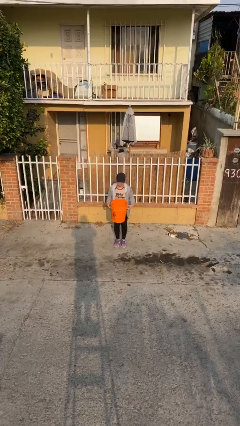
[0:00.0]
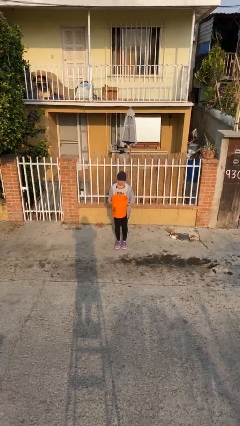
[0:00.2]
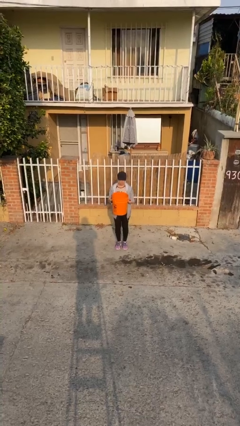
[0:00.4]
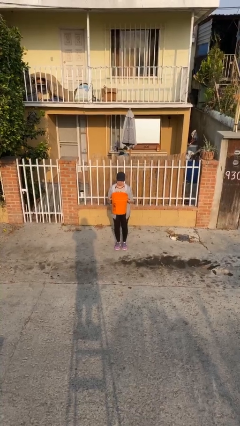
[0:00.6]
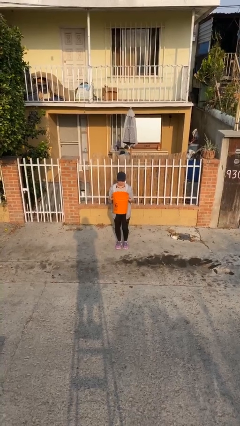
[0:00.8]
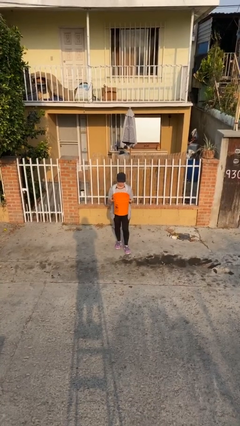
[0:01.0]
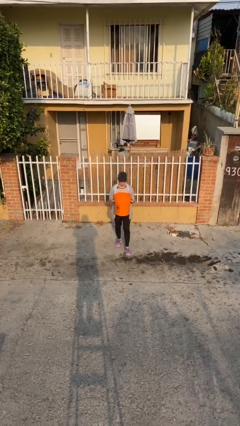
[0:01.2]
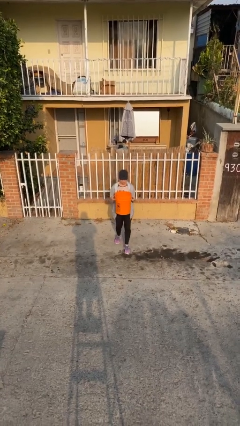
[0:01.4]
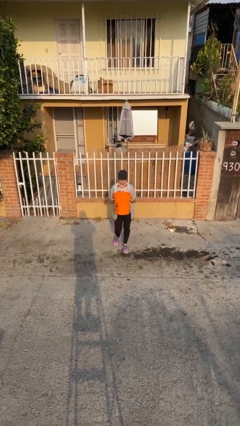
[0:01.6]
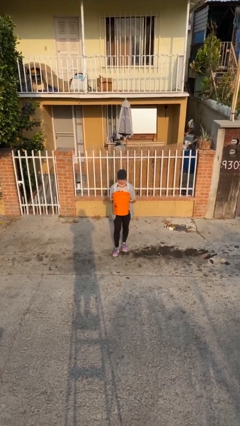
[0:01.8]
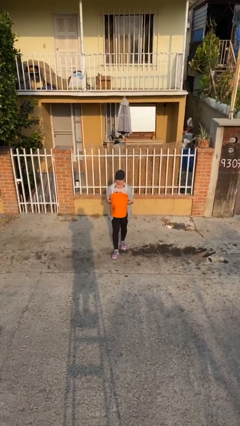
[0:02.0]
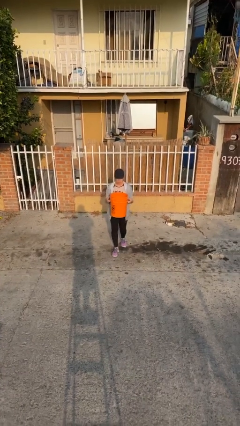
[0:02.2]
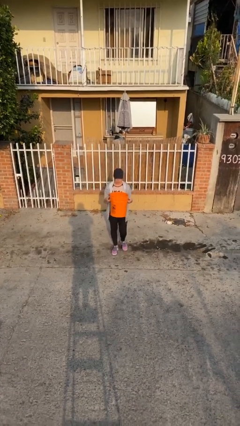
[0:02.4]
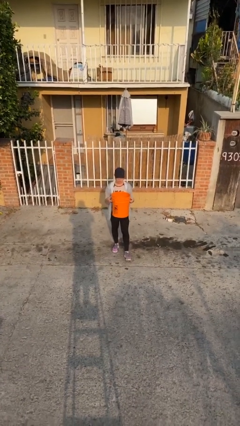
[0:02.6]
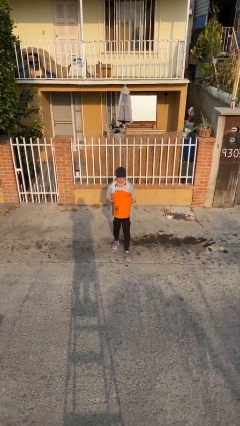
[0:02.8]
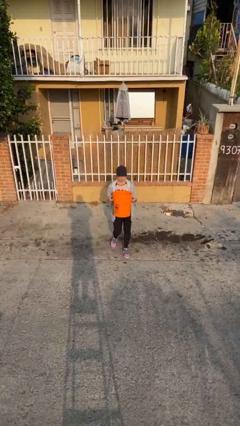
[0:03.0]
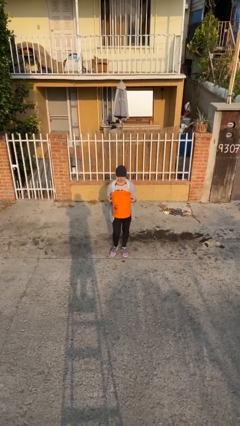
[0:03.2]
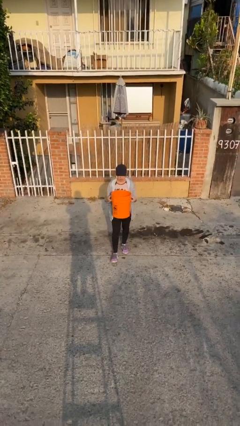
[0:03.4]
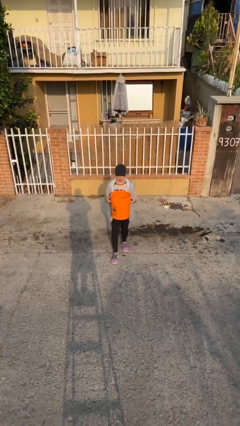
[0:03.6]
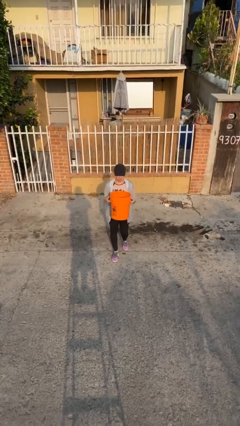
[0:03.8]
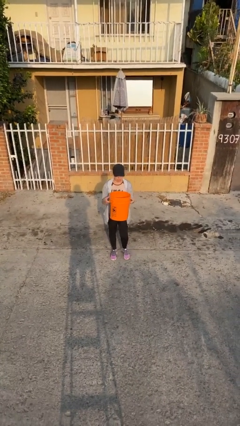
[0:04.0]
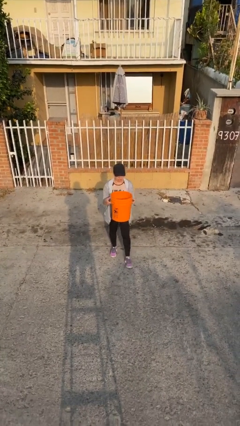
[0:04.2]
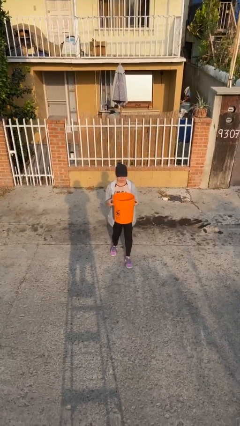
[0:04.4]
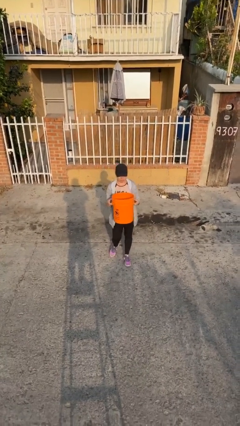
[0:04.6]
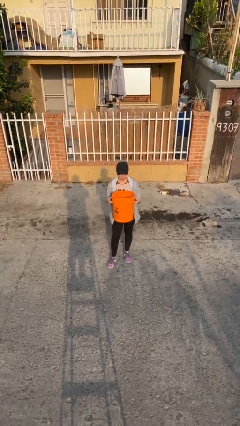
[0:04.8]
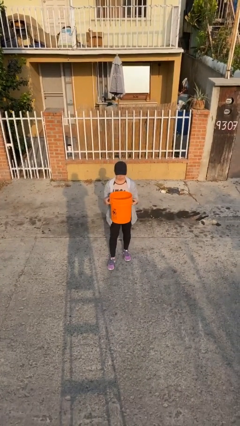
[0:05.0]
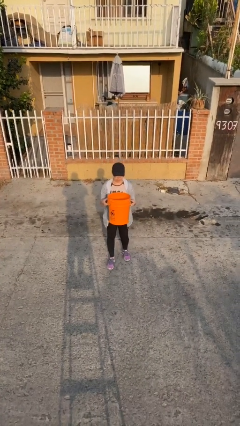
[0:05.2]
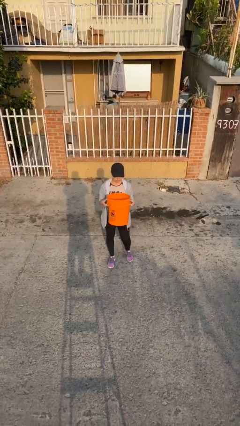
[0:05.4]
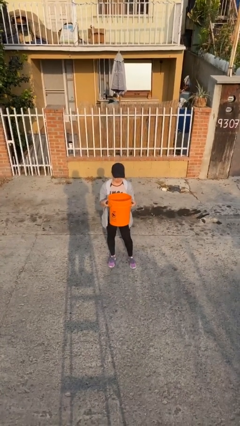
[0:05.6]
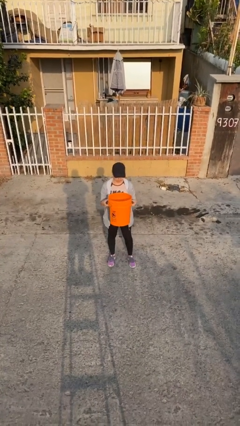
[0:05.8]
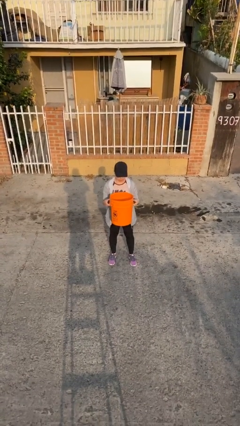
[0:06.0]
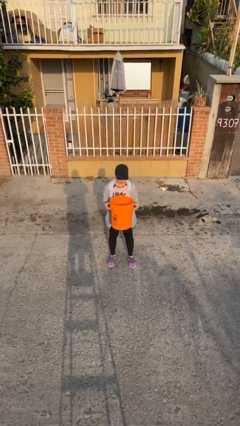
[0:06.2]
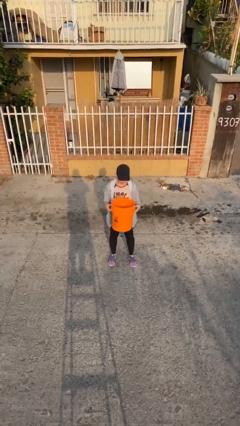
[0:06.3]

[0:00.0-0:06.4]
person carries heavy object

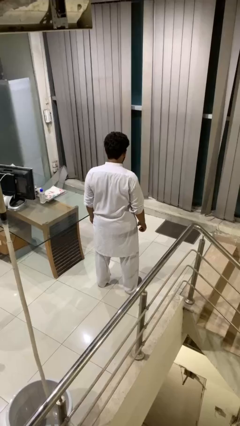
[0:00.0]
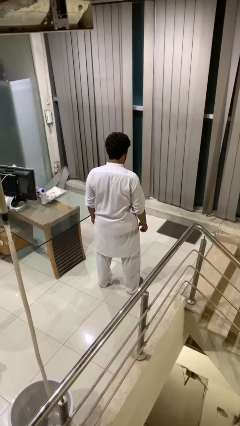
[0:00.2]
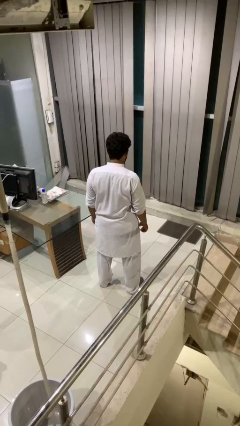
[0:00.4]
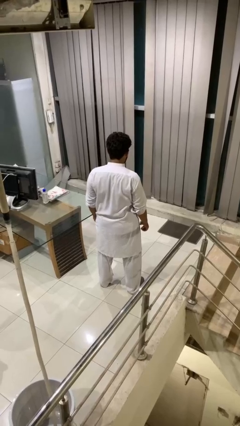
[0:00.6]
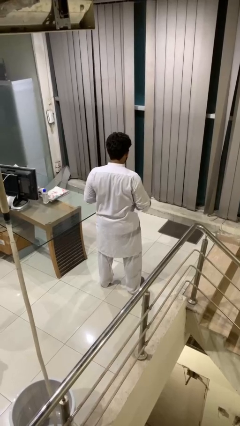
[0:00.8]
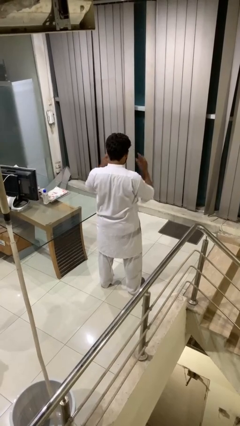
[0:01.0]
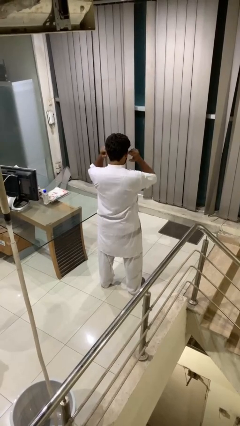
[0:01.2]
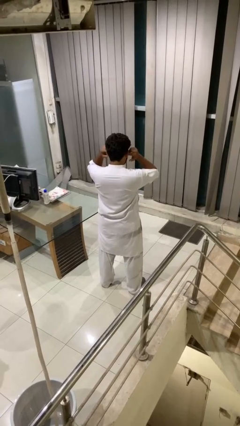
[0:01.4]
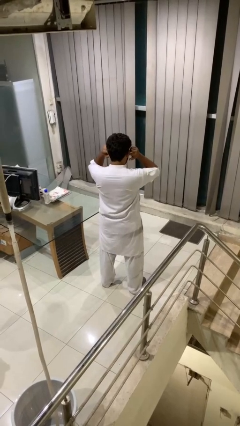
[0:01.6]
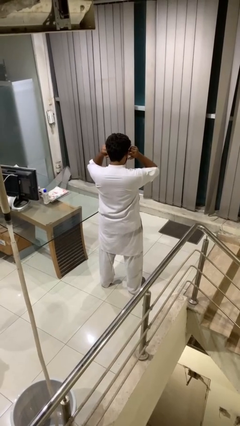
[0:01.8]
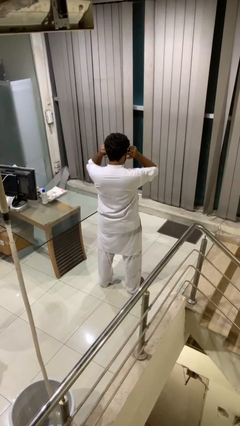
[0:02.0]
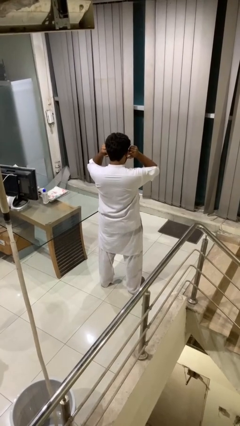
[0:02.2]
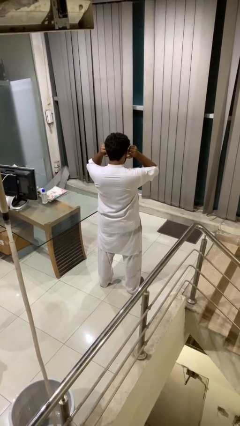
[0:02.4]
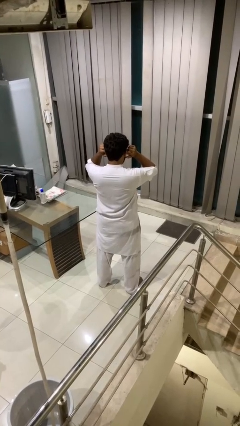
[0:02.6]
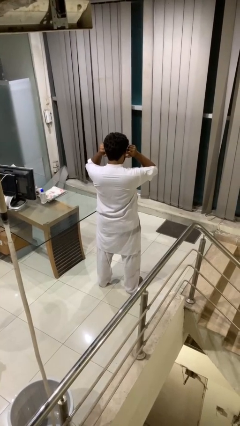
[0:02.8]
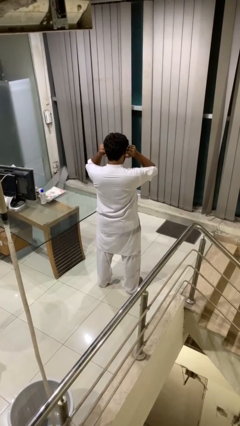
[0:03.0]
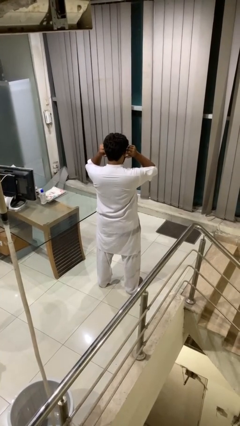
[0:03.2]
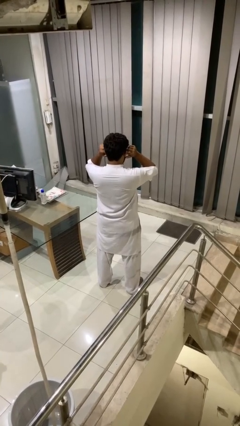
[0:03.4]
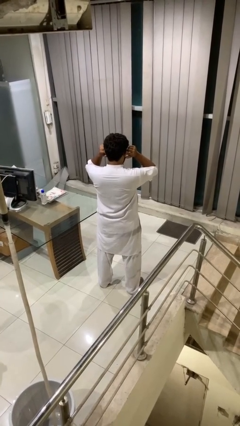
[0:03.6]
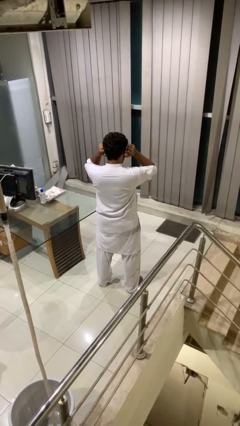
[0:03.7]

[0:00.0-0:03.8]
person puts fingers in ear

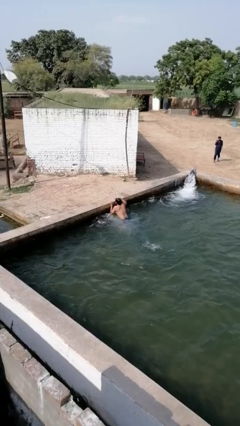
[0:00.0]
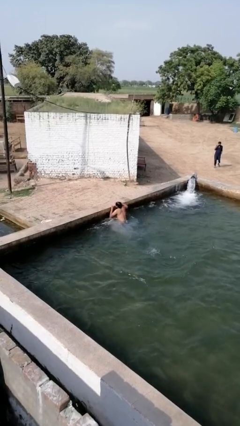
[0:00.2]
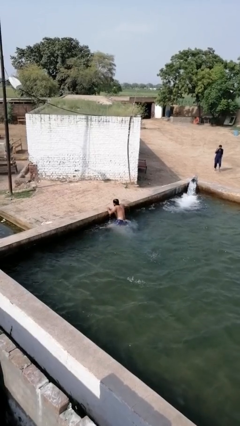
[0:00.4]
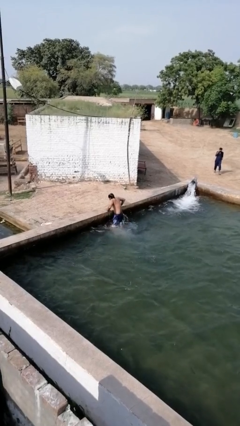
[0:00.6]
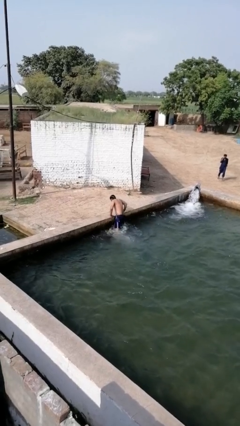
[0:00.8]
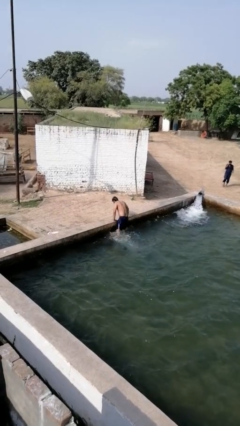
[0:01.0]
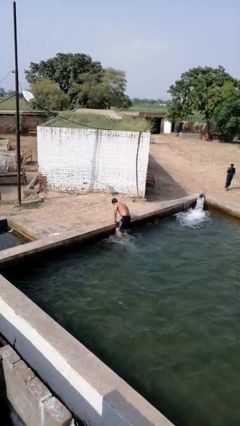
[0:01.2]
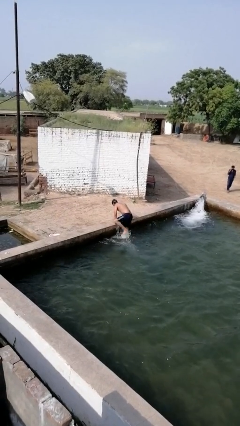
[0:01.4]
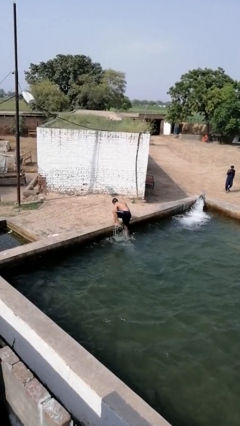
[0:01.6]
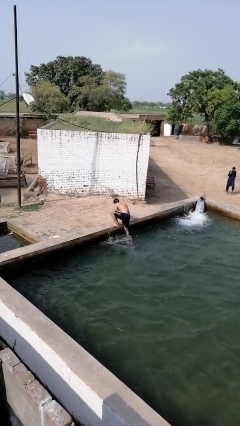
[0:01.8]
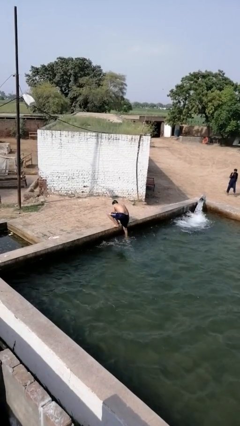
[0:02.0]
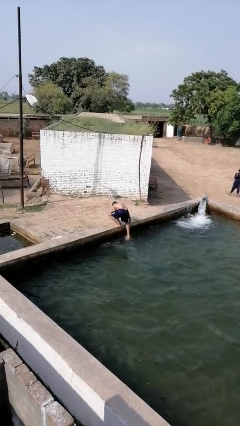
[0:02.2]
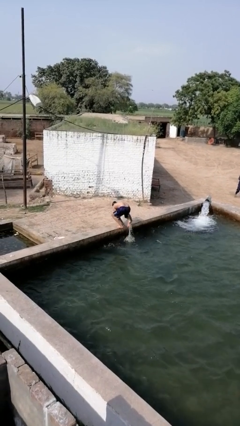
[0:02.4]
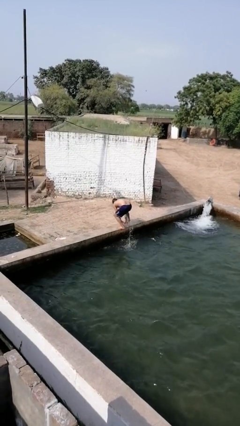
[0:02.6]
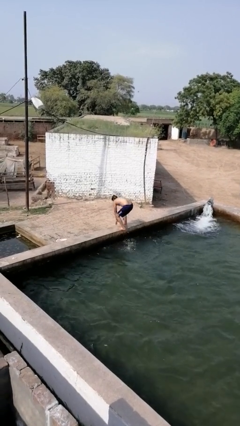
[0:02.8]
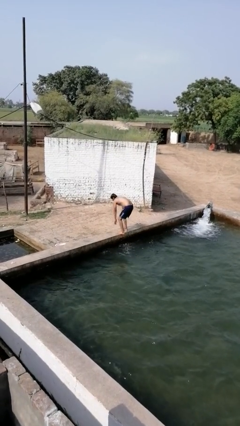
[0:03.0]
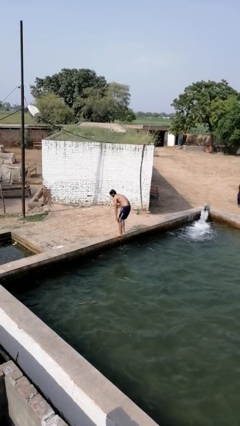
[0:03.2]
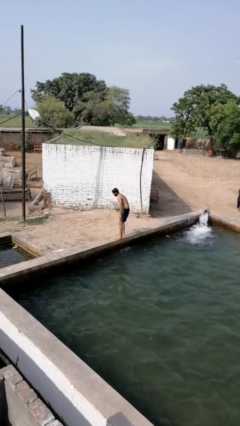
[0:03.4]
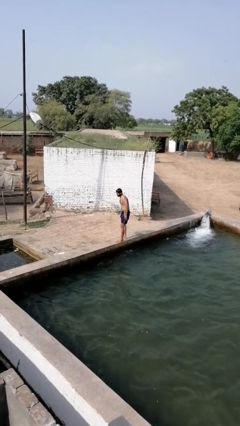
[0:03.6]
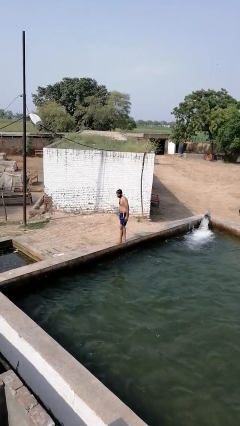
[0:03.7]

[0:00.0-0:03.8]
person exits pool

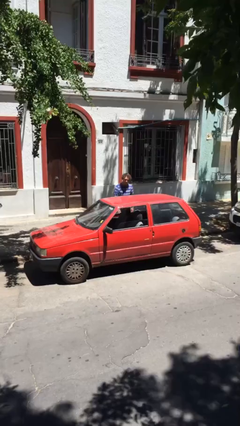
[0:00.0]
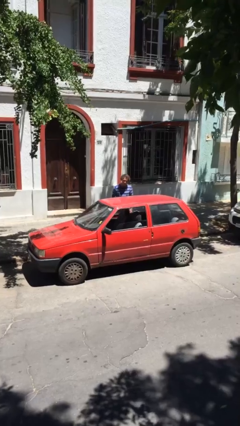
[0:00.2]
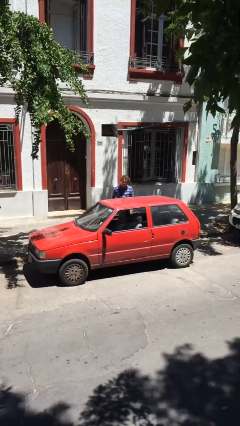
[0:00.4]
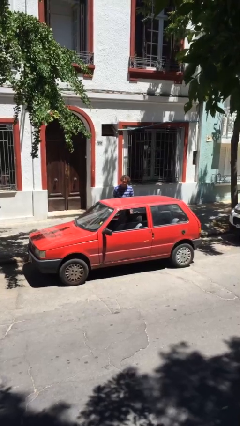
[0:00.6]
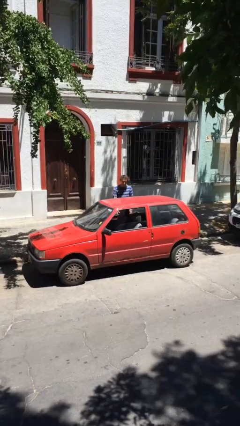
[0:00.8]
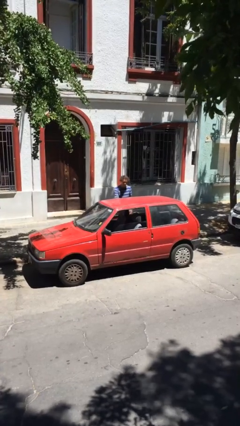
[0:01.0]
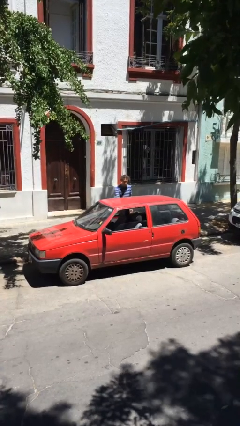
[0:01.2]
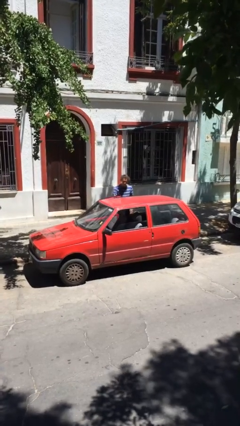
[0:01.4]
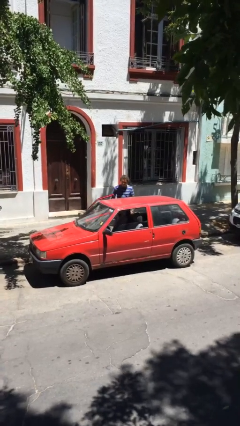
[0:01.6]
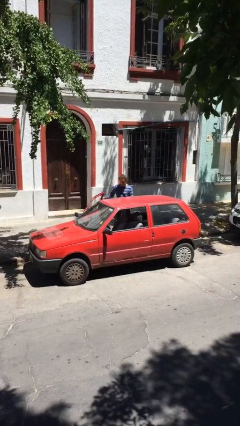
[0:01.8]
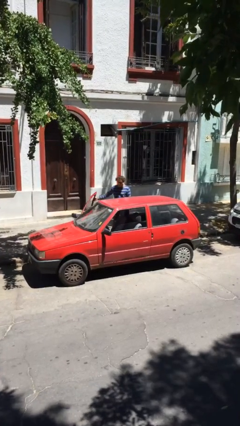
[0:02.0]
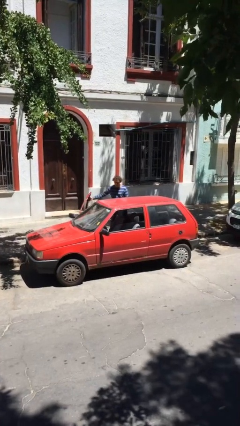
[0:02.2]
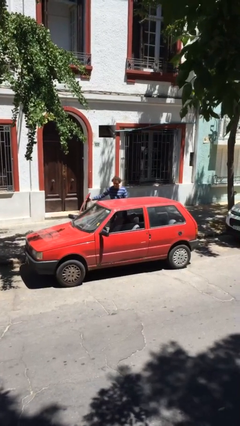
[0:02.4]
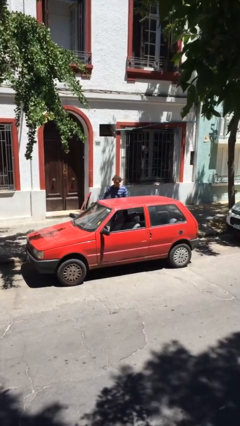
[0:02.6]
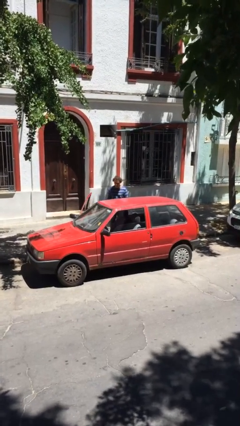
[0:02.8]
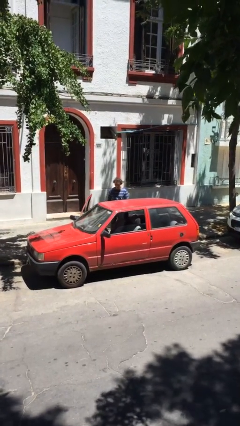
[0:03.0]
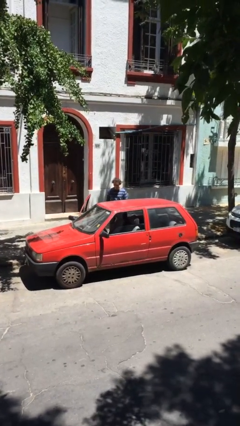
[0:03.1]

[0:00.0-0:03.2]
person opens car door

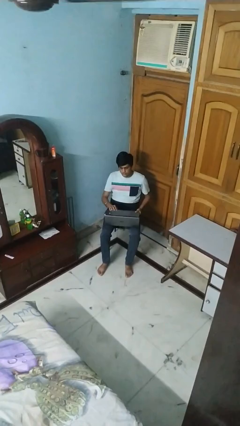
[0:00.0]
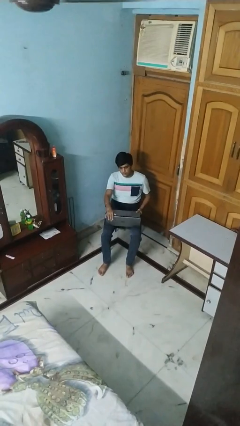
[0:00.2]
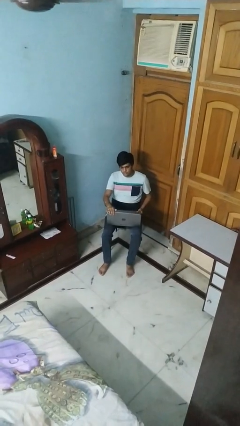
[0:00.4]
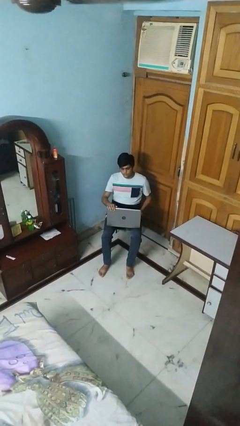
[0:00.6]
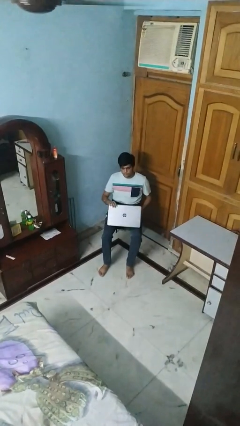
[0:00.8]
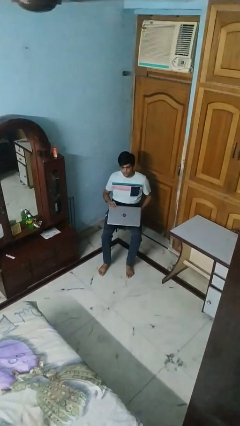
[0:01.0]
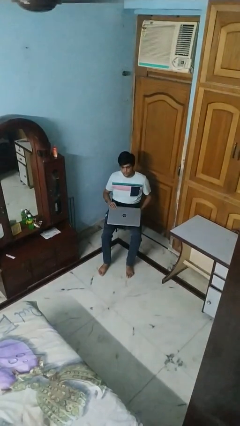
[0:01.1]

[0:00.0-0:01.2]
person closes laptop
